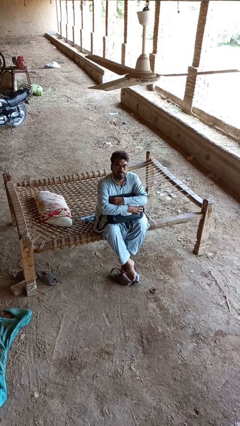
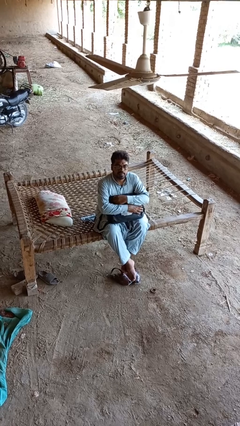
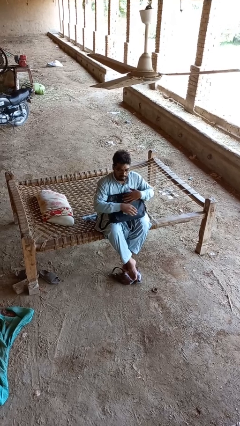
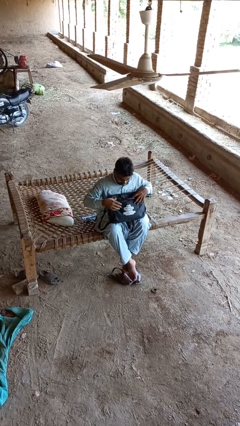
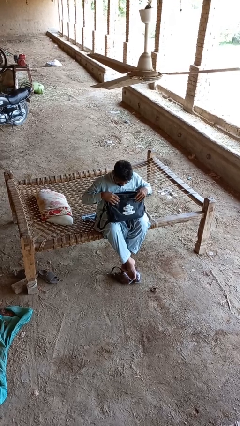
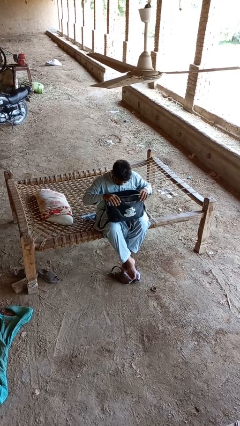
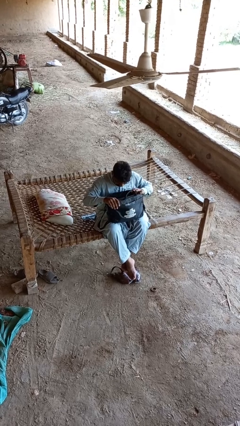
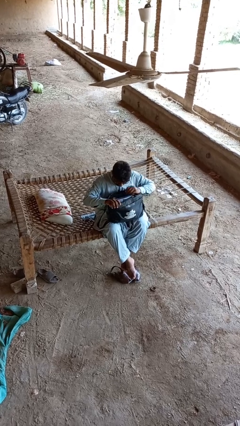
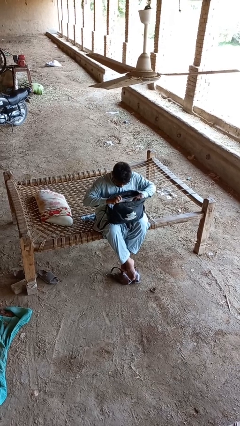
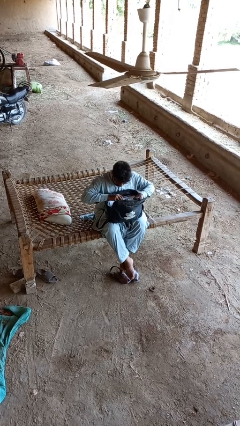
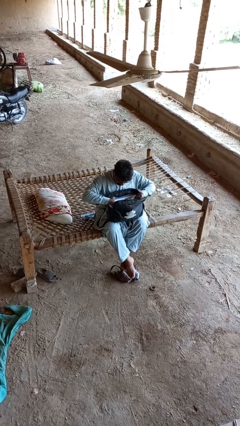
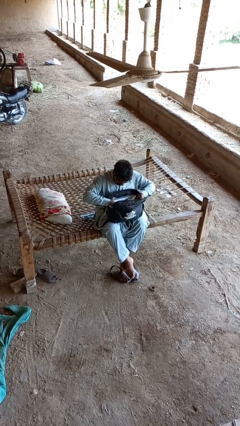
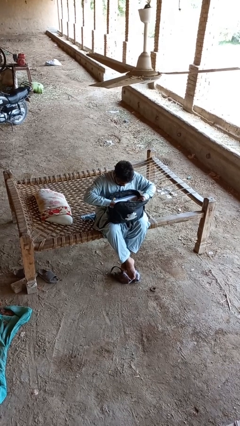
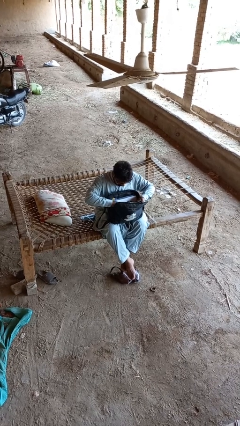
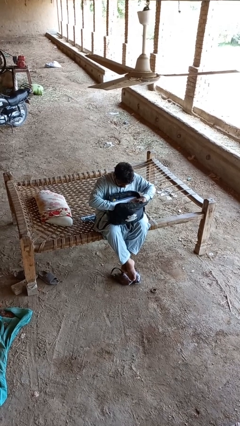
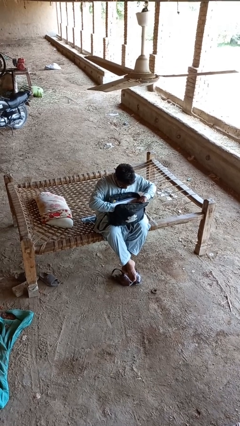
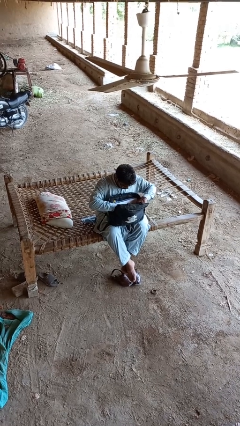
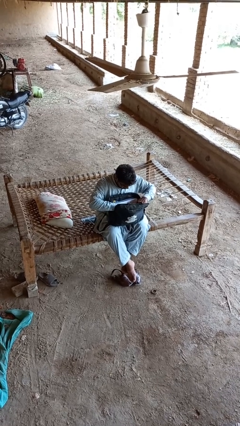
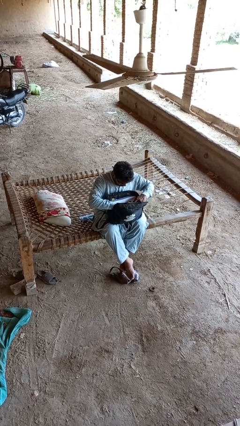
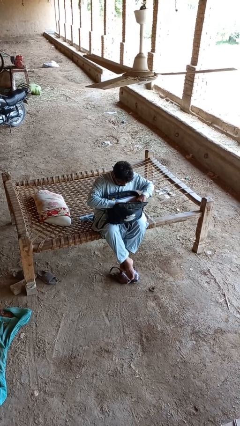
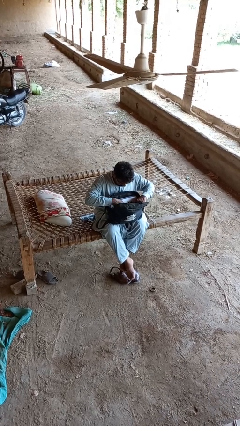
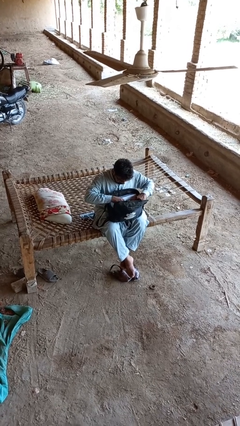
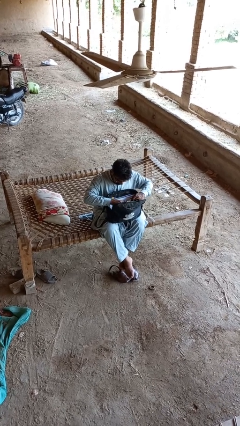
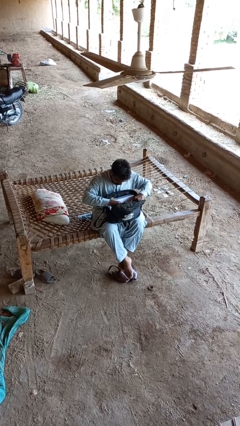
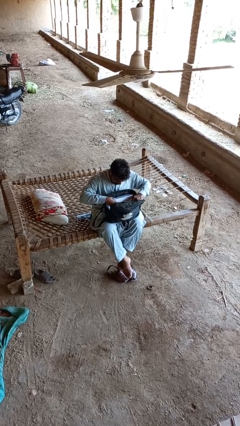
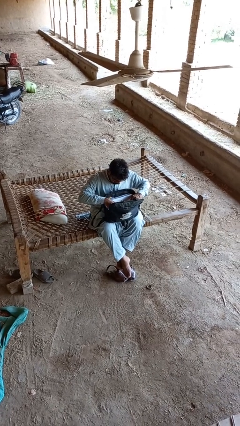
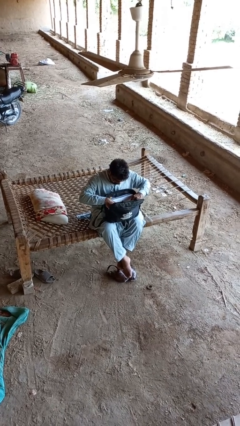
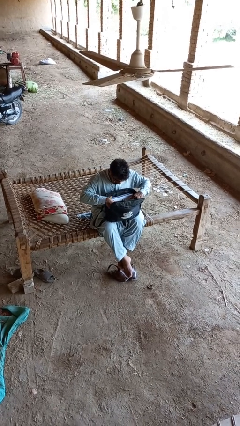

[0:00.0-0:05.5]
person searches in backpack

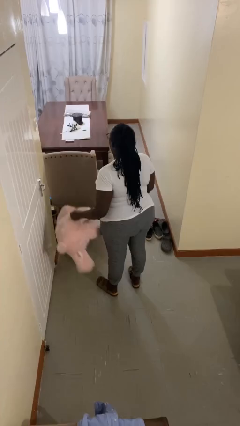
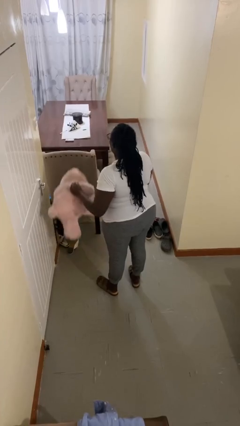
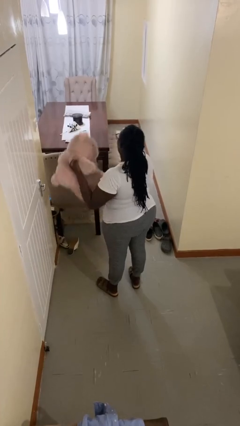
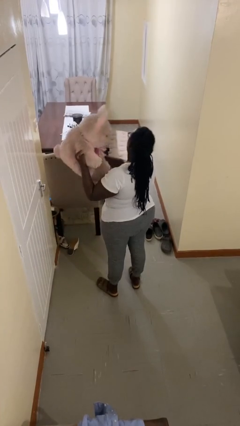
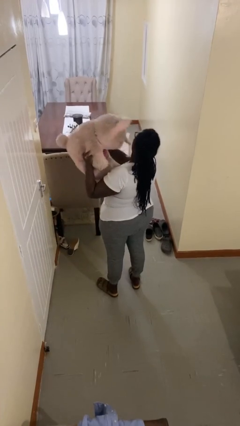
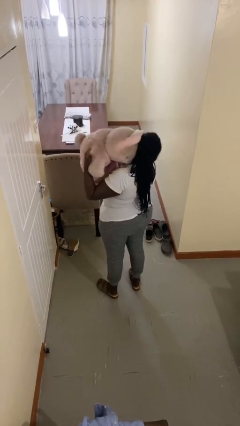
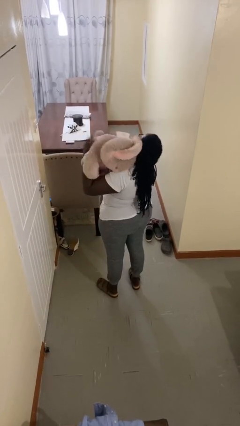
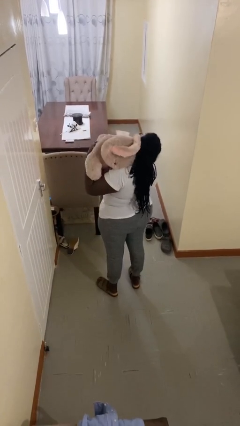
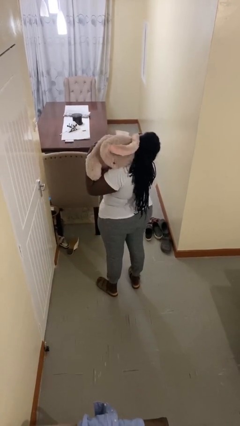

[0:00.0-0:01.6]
person hugs stuffed animal

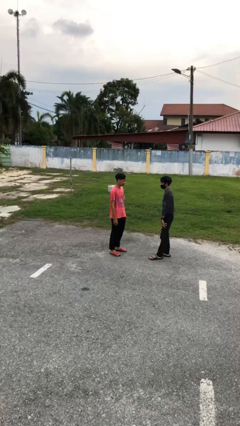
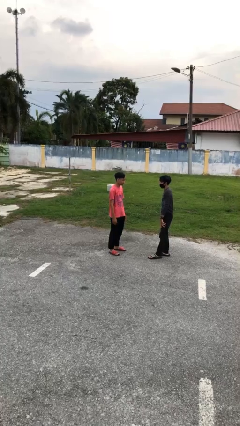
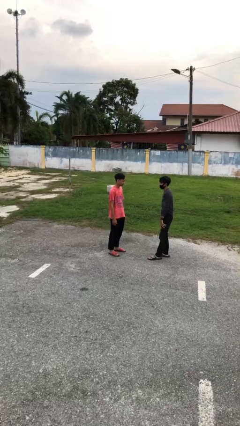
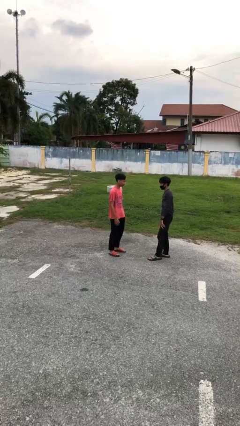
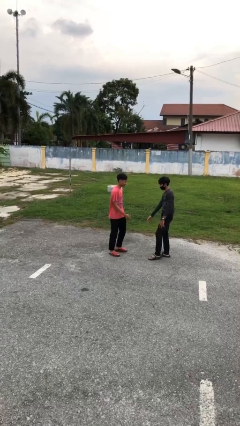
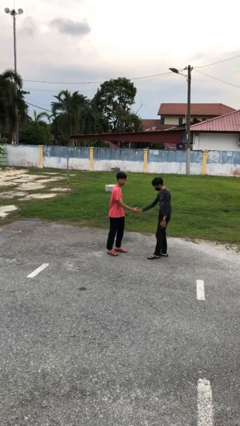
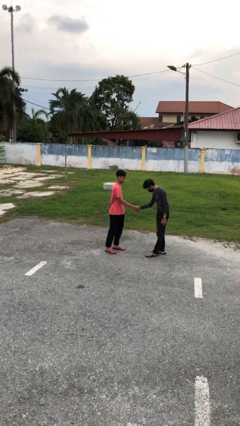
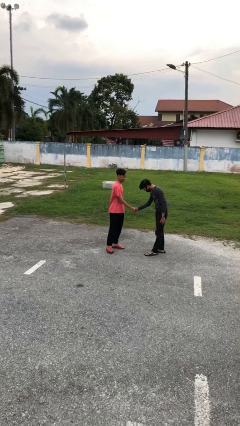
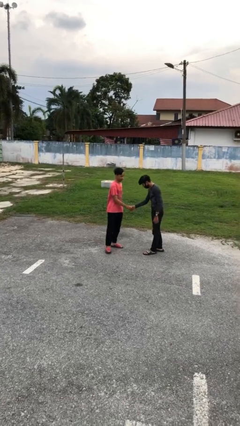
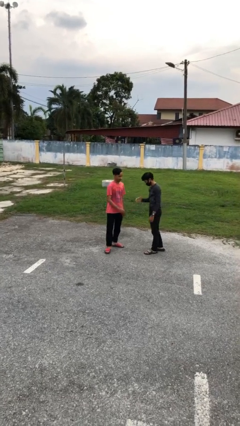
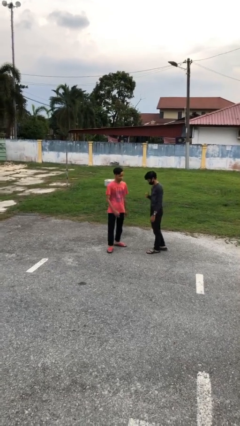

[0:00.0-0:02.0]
person shakes hand

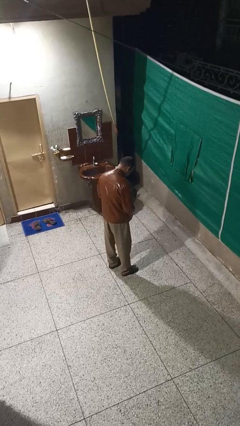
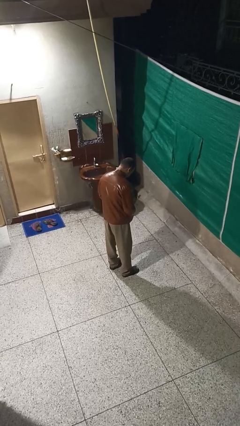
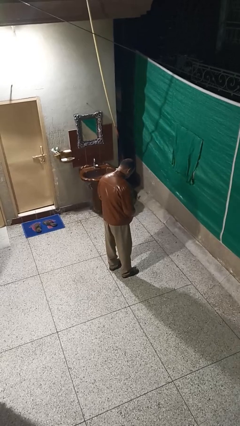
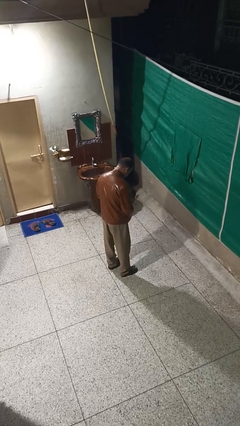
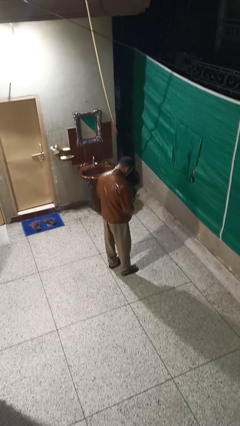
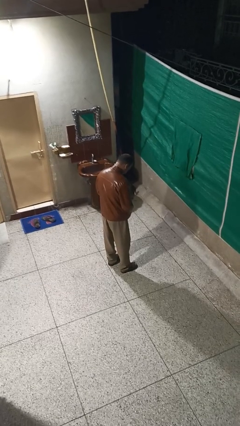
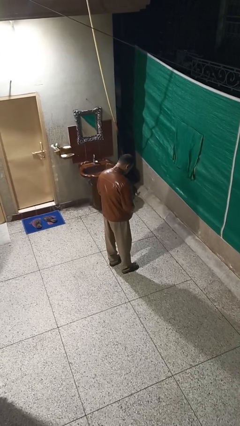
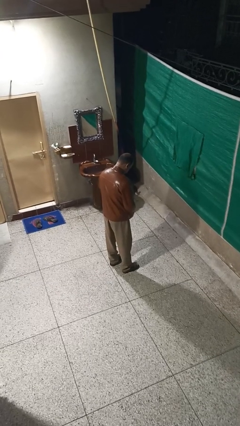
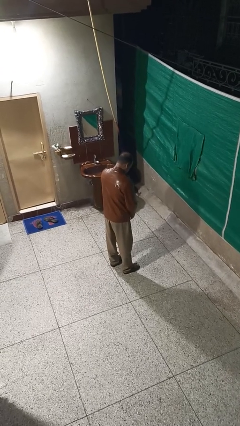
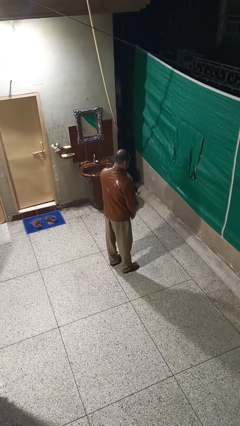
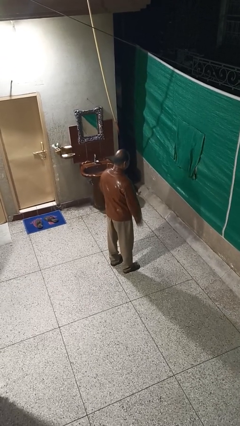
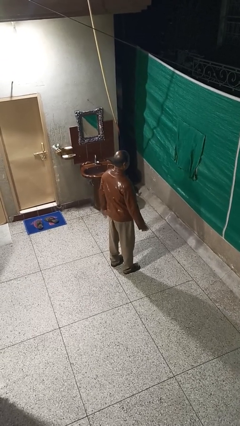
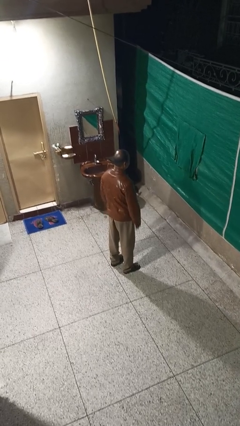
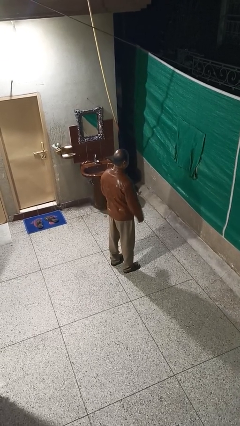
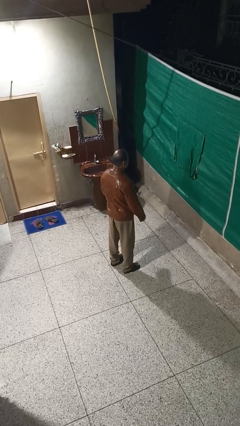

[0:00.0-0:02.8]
person zips up jacket

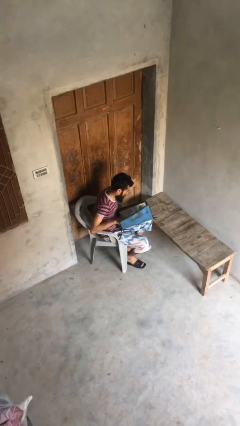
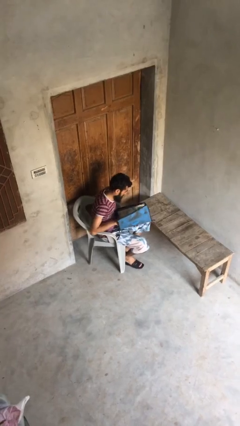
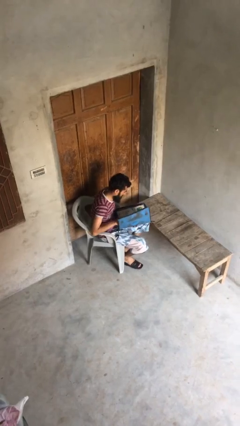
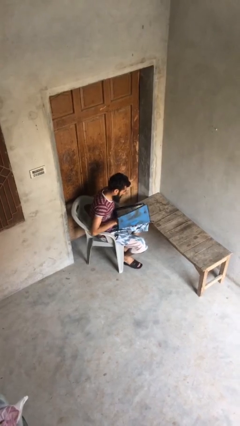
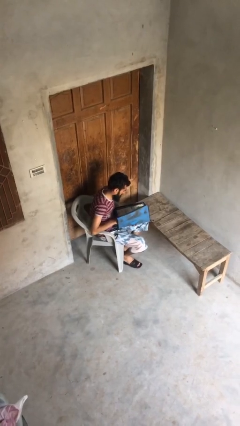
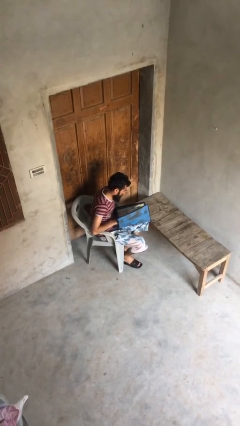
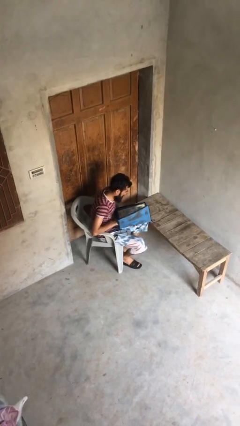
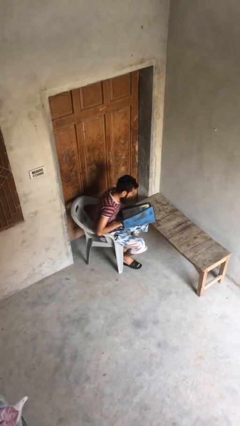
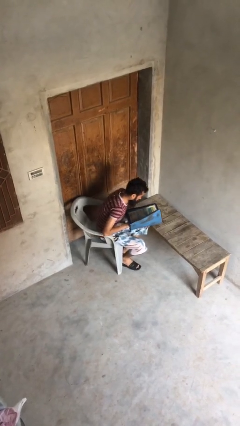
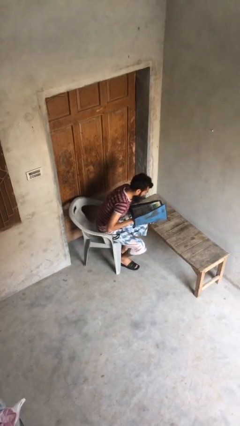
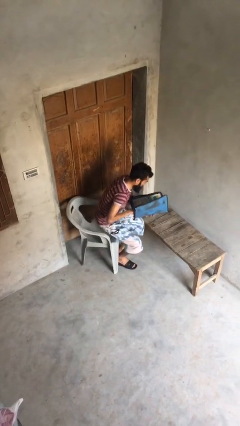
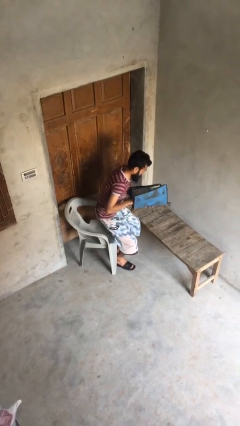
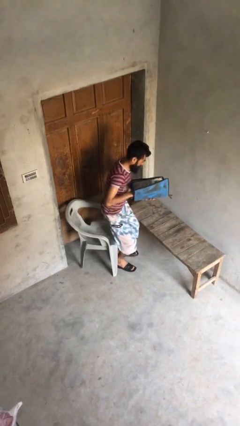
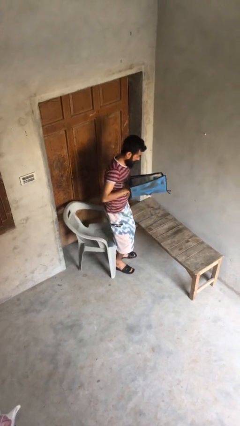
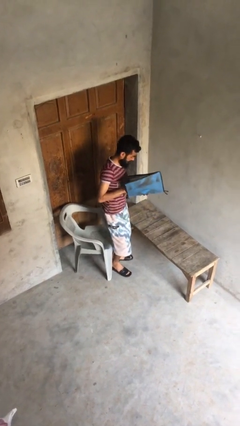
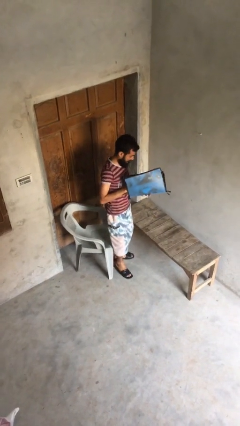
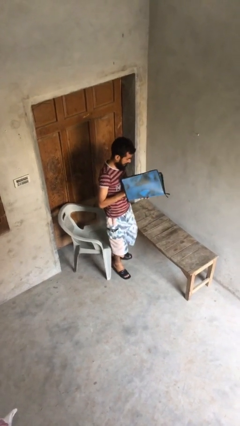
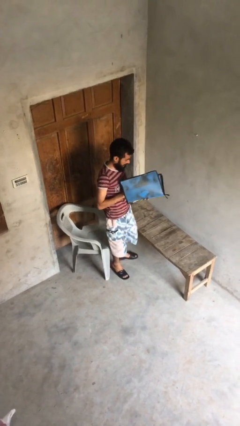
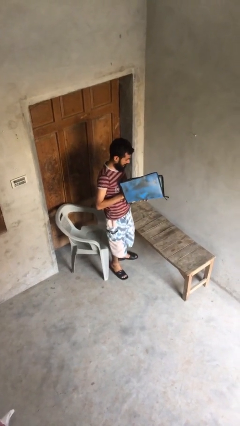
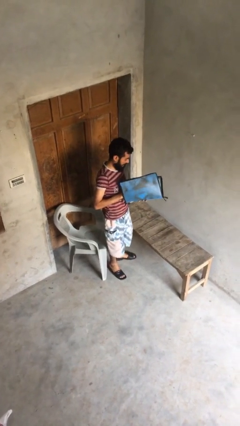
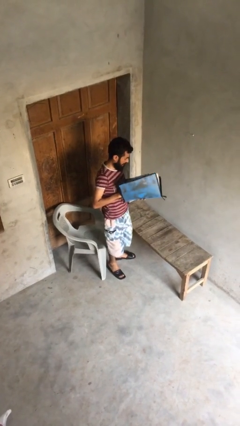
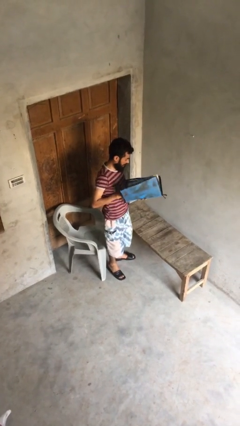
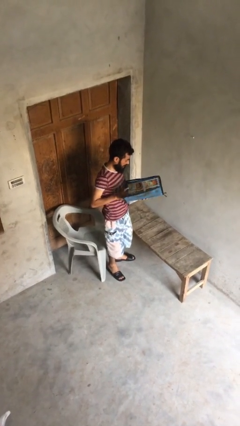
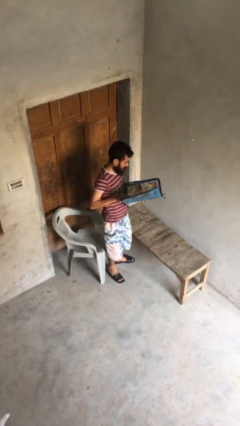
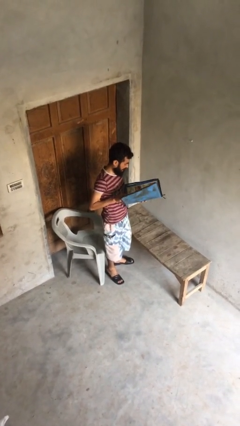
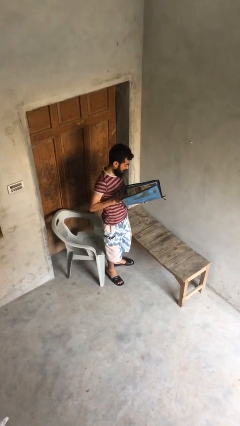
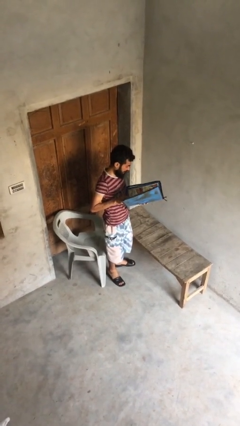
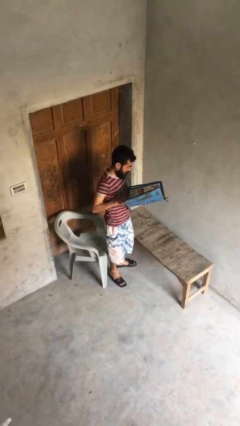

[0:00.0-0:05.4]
person stands up

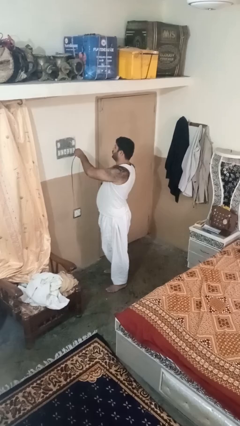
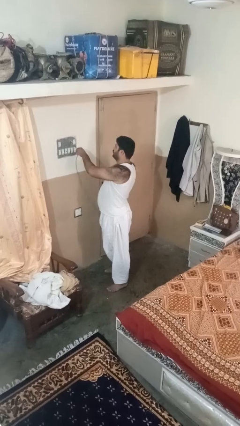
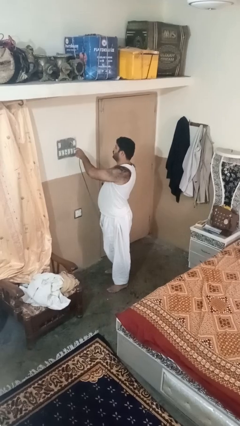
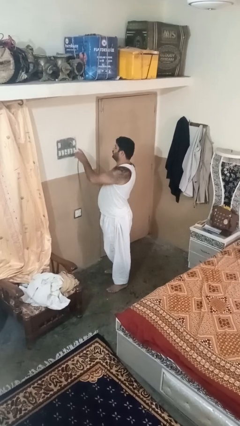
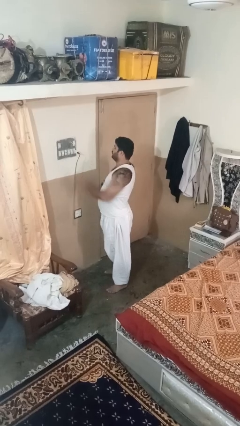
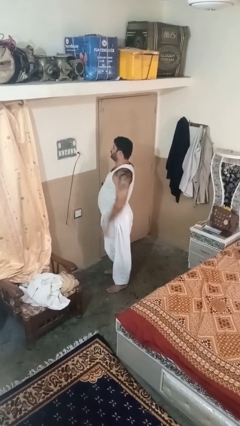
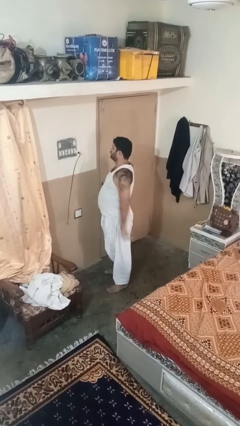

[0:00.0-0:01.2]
person plugs into electrical socket
